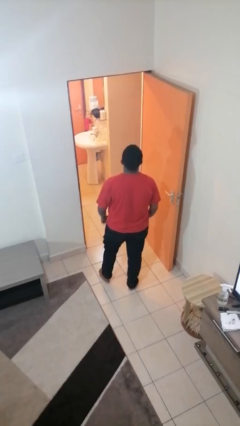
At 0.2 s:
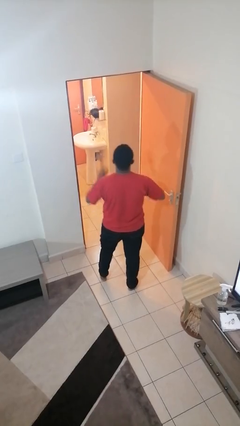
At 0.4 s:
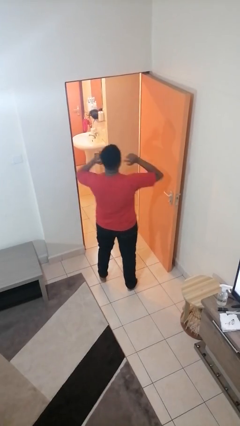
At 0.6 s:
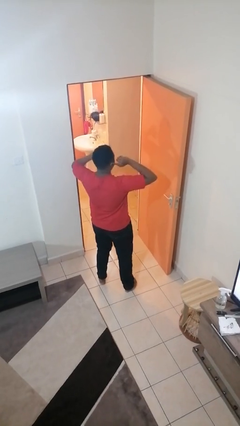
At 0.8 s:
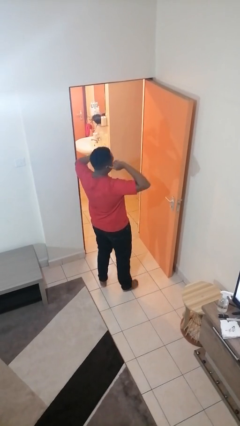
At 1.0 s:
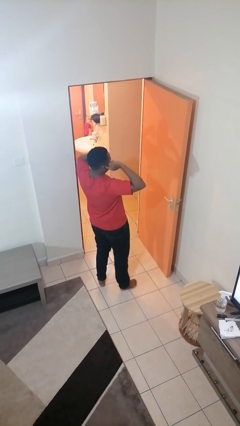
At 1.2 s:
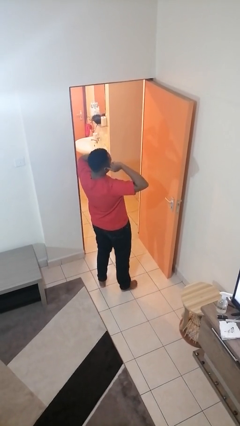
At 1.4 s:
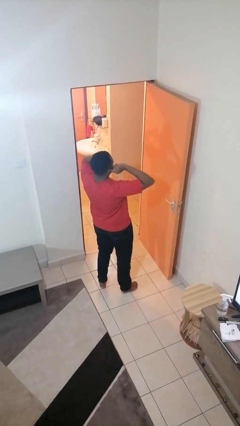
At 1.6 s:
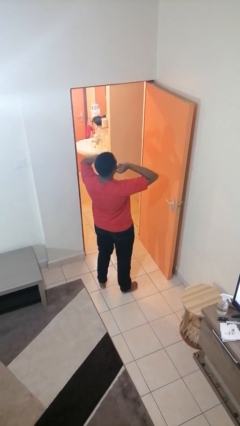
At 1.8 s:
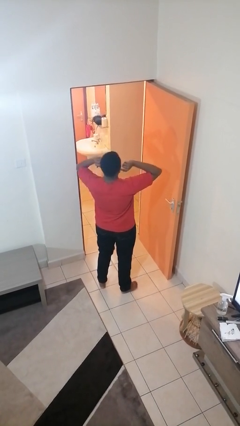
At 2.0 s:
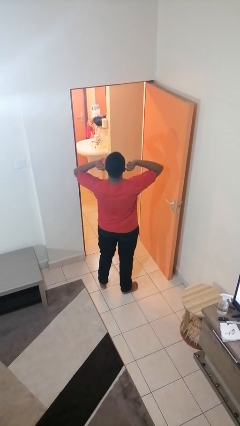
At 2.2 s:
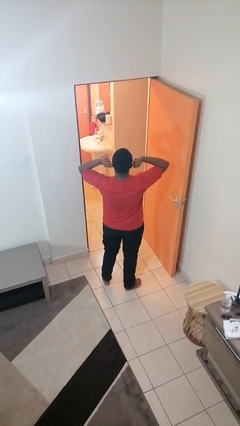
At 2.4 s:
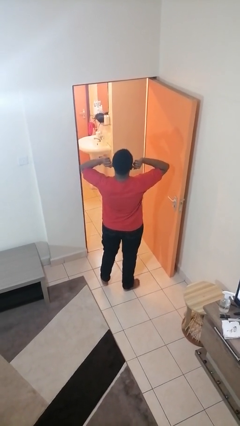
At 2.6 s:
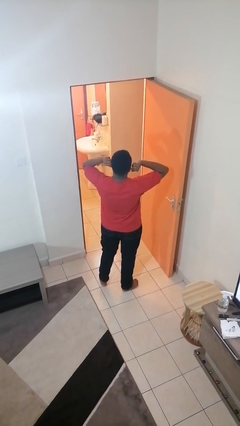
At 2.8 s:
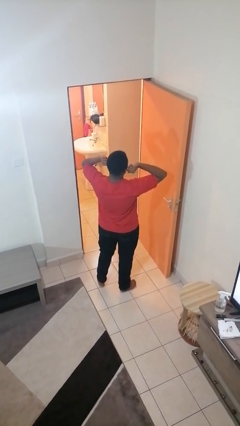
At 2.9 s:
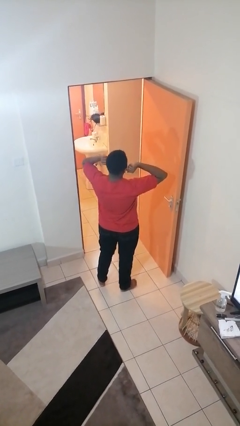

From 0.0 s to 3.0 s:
person puts fingers in ear

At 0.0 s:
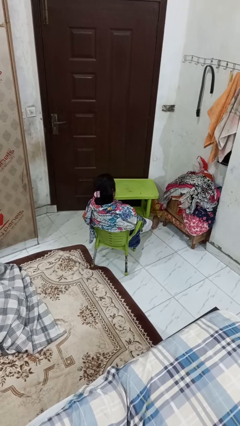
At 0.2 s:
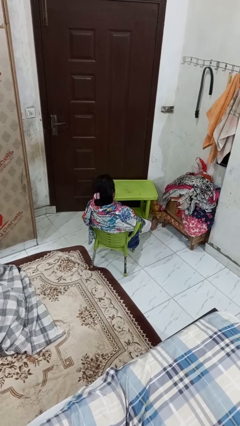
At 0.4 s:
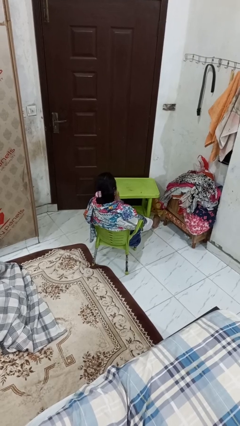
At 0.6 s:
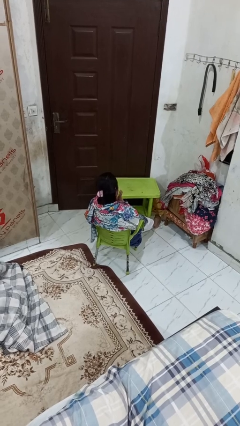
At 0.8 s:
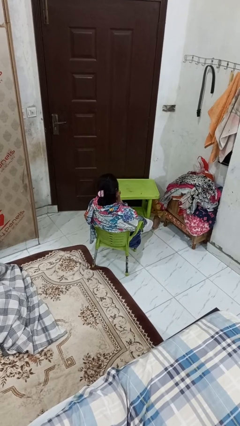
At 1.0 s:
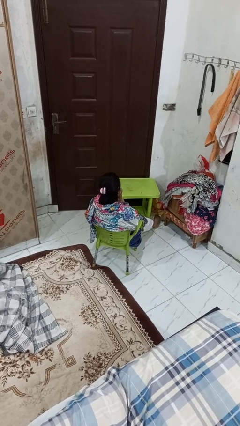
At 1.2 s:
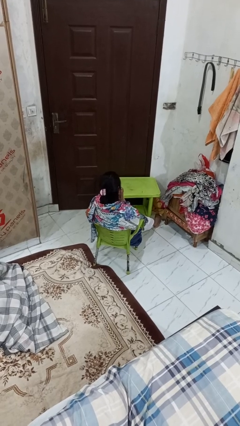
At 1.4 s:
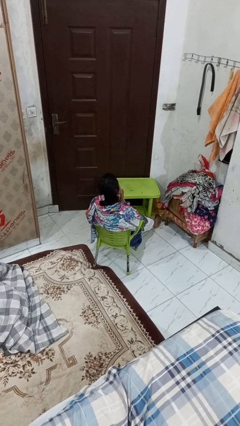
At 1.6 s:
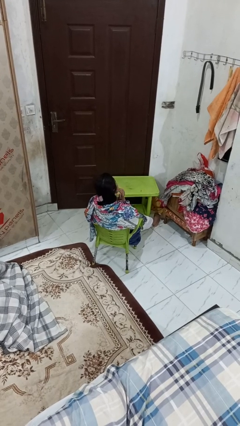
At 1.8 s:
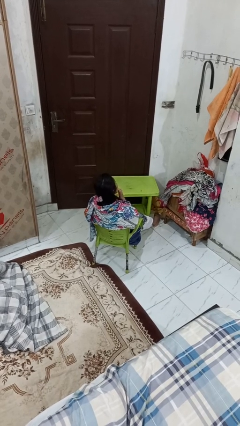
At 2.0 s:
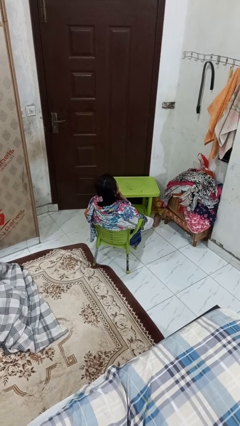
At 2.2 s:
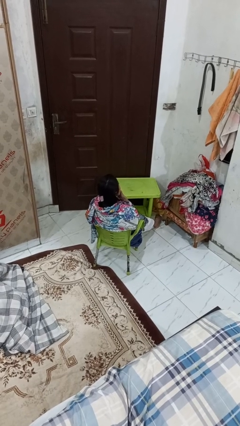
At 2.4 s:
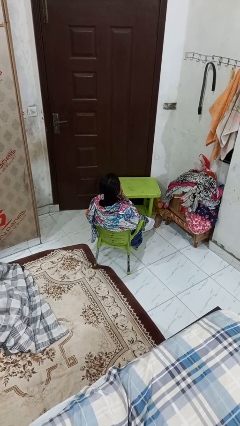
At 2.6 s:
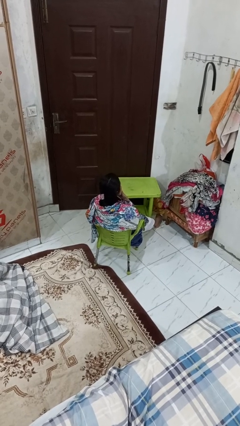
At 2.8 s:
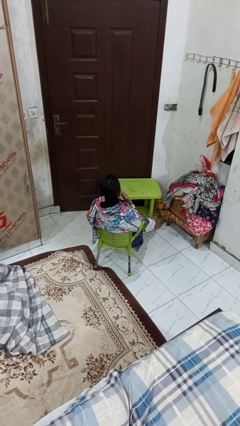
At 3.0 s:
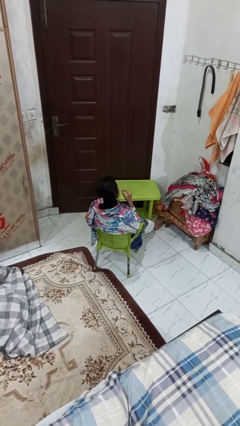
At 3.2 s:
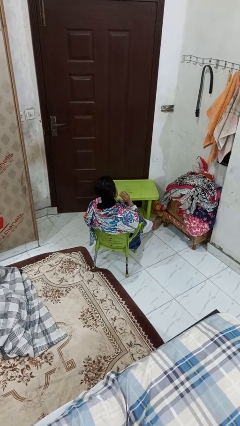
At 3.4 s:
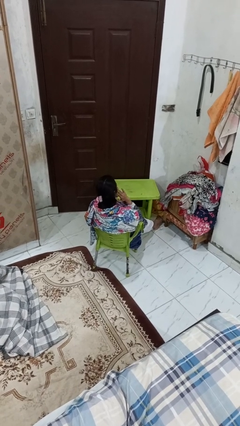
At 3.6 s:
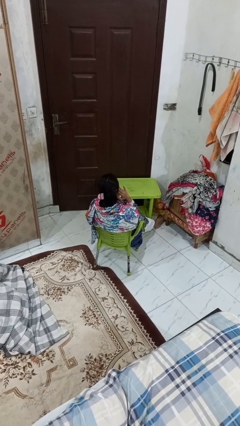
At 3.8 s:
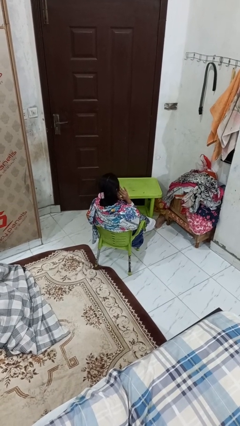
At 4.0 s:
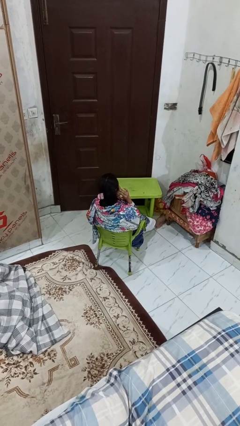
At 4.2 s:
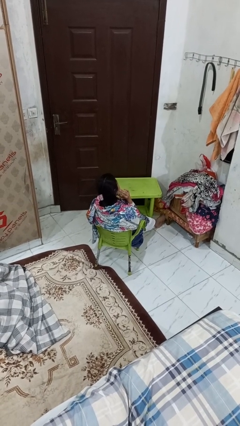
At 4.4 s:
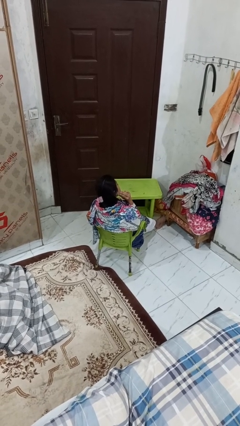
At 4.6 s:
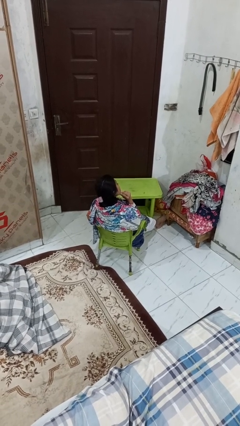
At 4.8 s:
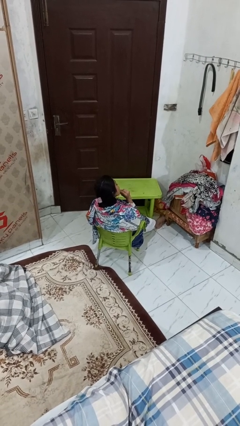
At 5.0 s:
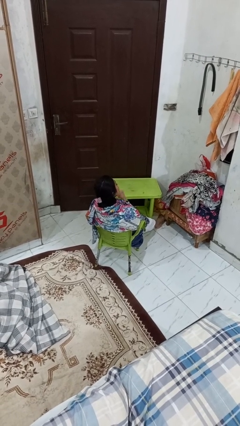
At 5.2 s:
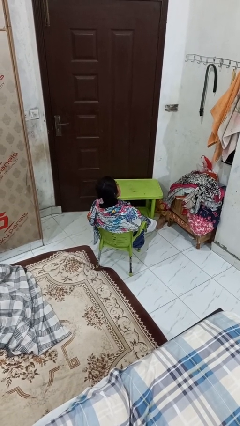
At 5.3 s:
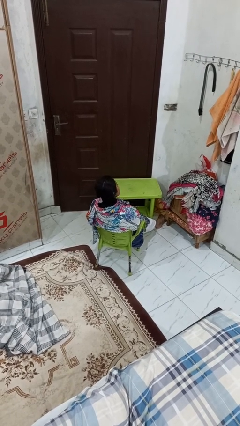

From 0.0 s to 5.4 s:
person strokes chin

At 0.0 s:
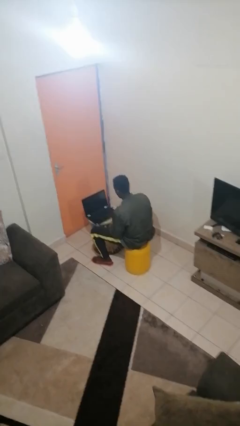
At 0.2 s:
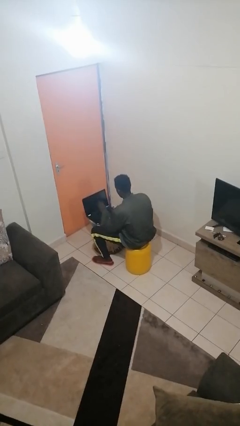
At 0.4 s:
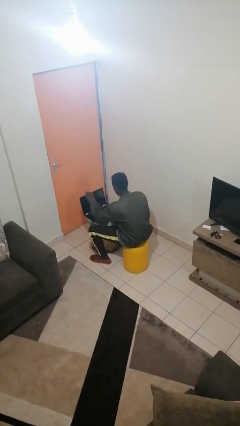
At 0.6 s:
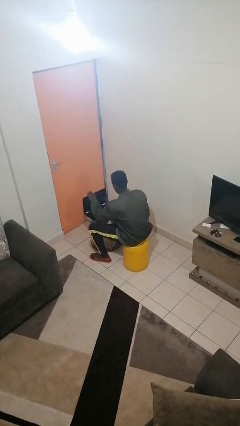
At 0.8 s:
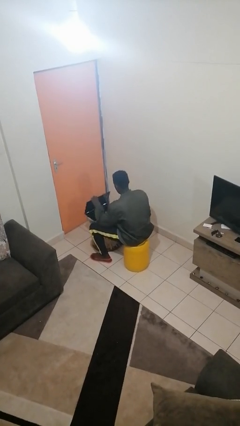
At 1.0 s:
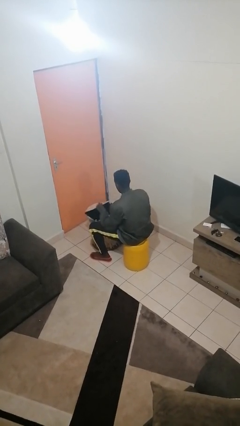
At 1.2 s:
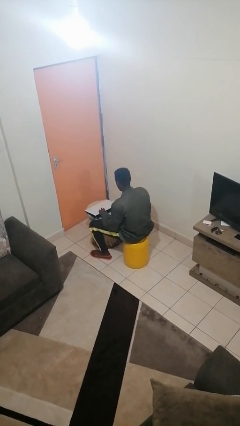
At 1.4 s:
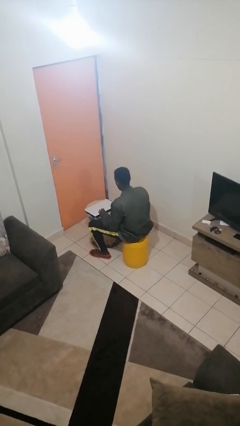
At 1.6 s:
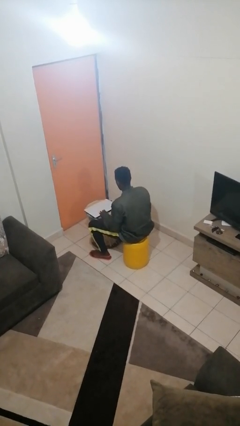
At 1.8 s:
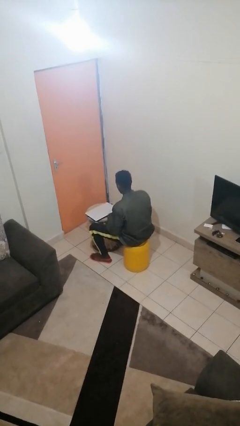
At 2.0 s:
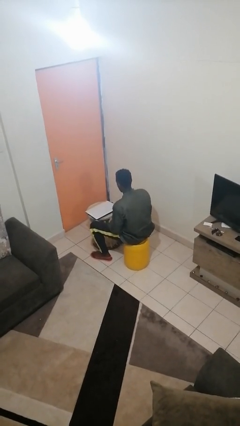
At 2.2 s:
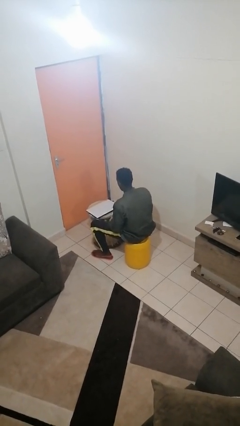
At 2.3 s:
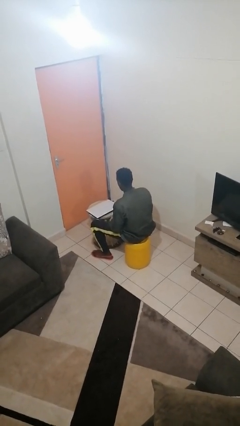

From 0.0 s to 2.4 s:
person closes laptop

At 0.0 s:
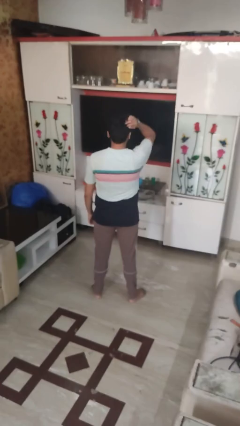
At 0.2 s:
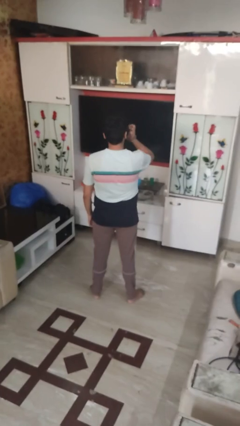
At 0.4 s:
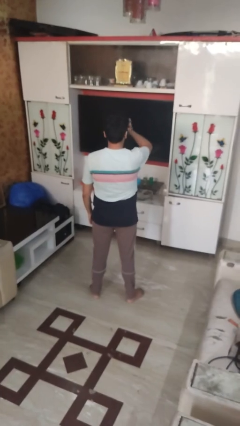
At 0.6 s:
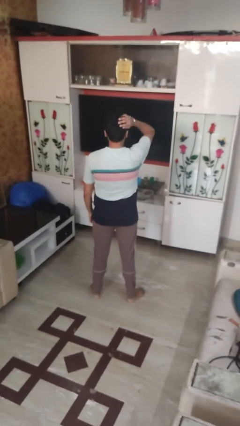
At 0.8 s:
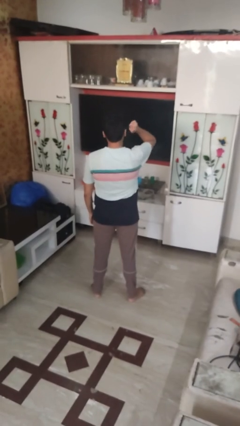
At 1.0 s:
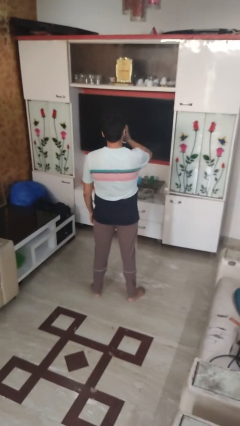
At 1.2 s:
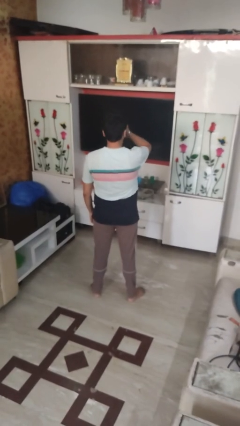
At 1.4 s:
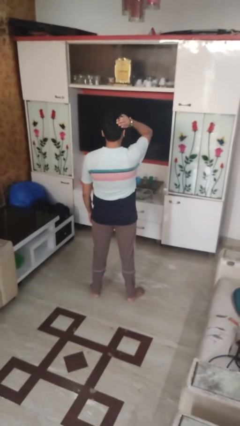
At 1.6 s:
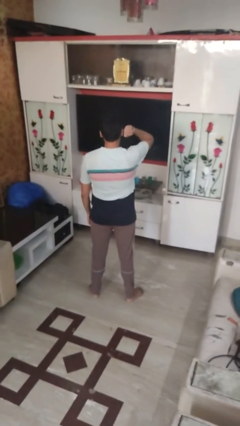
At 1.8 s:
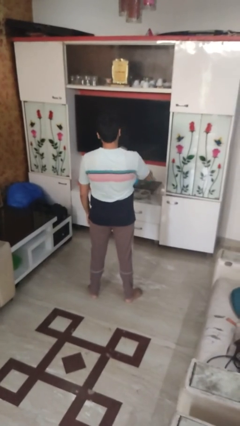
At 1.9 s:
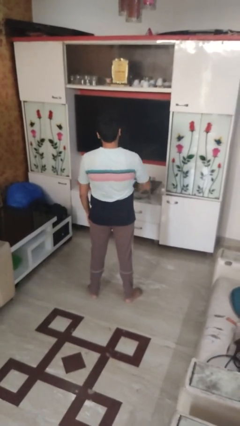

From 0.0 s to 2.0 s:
person strokes hair

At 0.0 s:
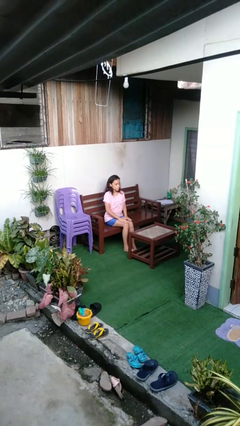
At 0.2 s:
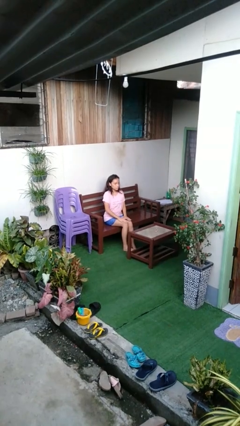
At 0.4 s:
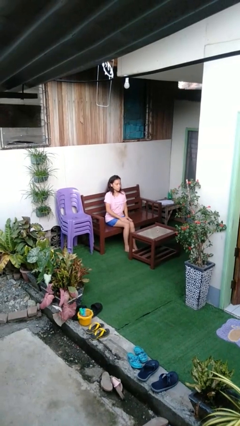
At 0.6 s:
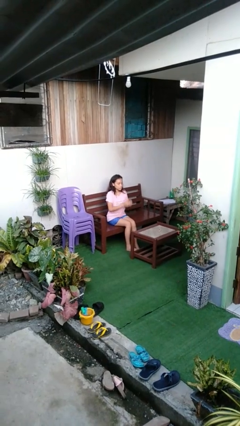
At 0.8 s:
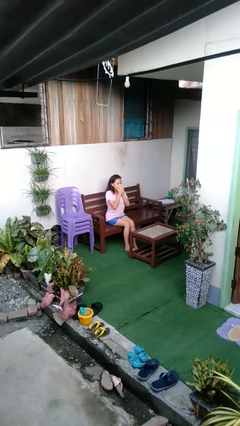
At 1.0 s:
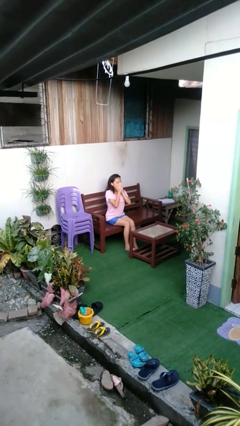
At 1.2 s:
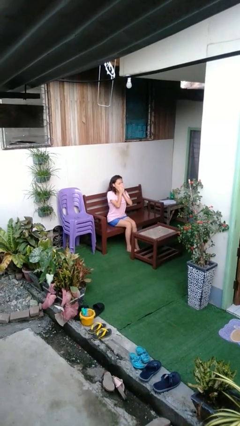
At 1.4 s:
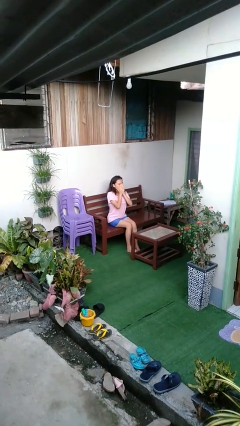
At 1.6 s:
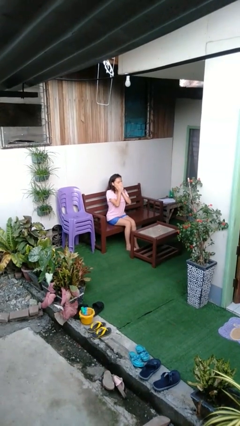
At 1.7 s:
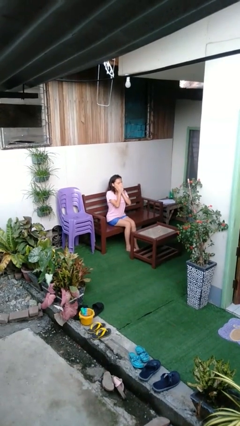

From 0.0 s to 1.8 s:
person yawns

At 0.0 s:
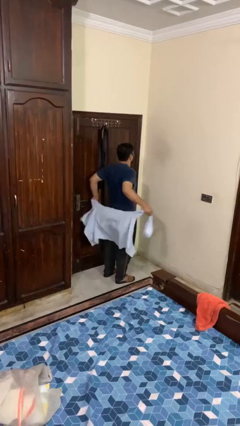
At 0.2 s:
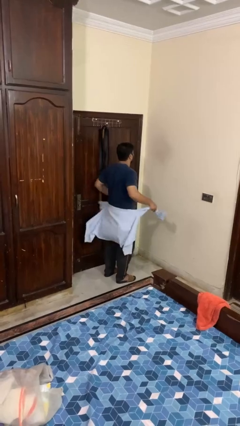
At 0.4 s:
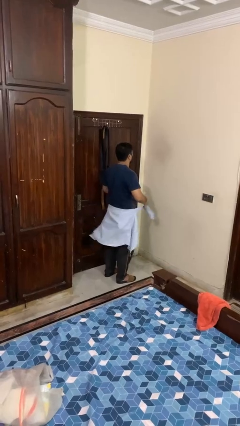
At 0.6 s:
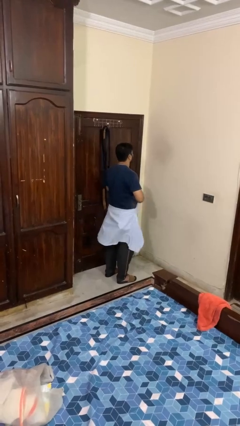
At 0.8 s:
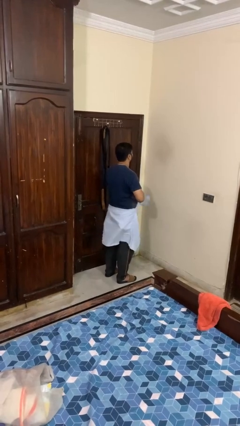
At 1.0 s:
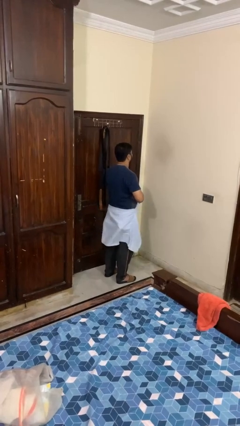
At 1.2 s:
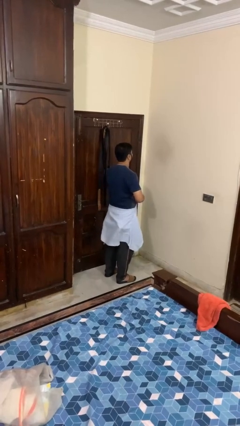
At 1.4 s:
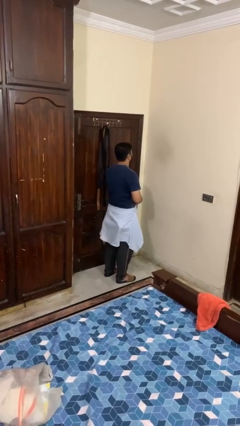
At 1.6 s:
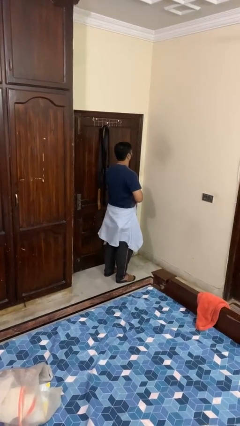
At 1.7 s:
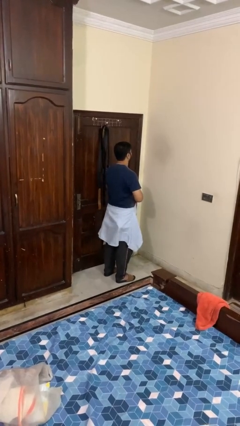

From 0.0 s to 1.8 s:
person ties jacket around waist

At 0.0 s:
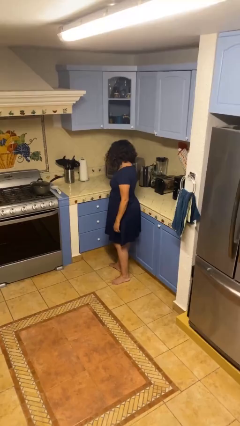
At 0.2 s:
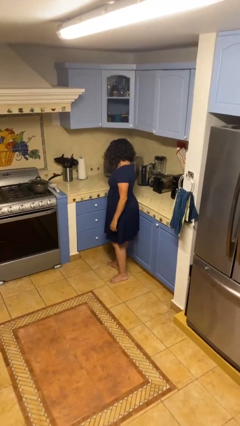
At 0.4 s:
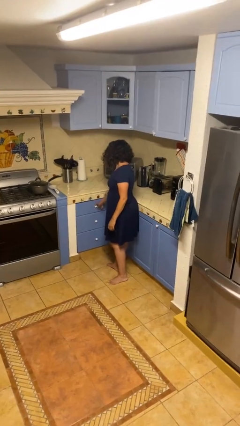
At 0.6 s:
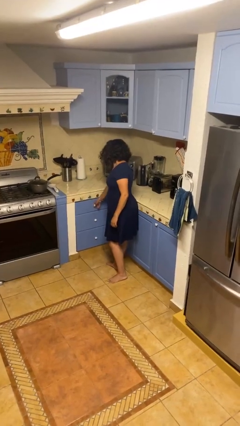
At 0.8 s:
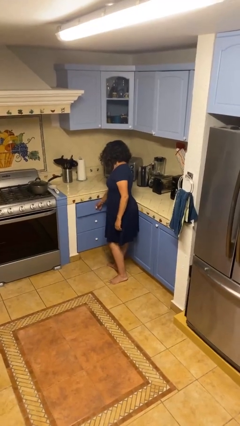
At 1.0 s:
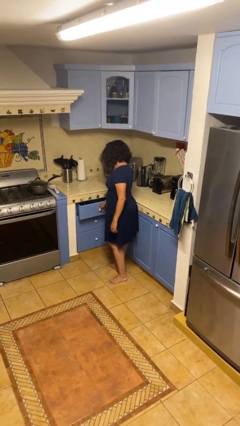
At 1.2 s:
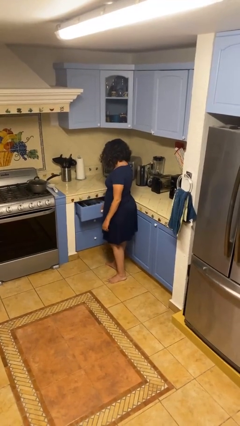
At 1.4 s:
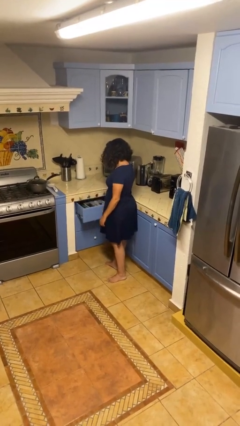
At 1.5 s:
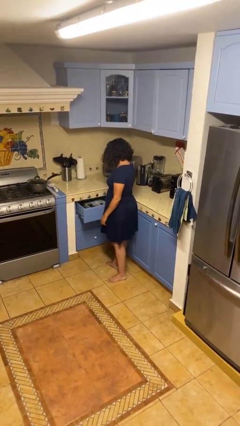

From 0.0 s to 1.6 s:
person opens kitchen drawer
